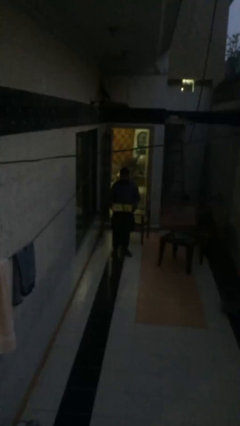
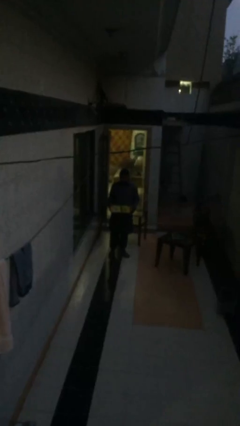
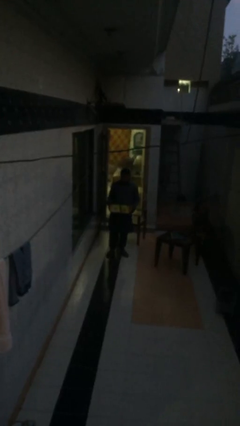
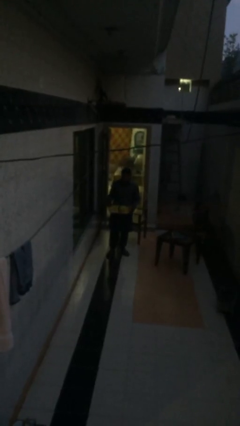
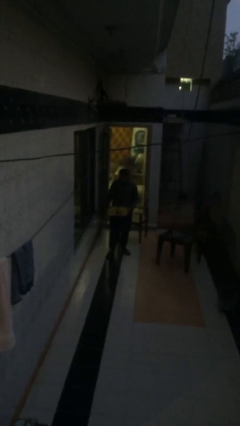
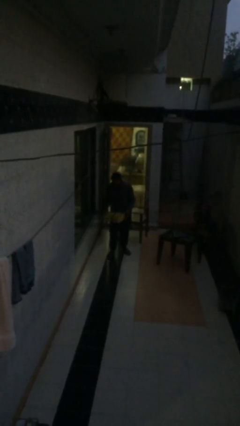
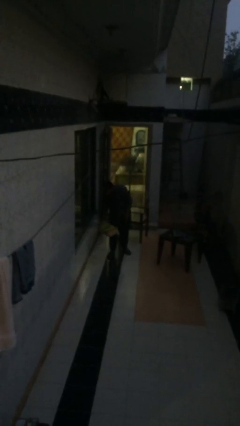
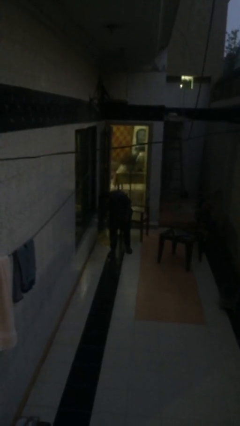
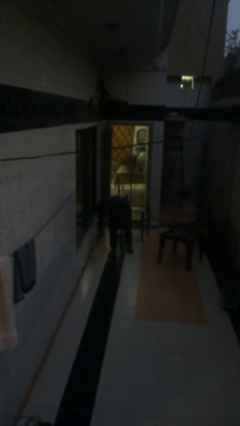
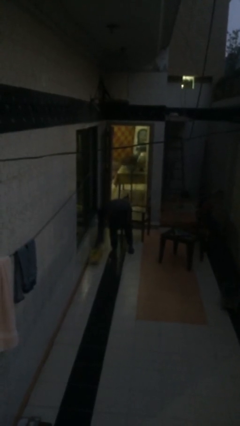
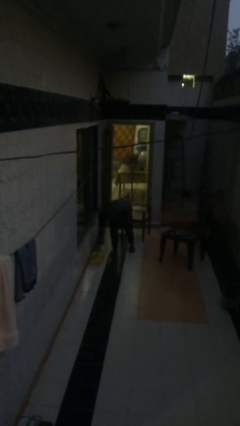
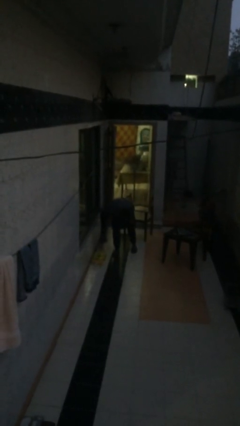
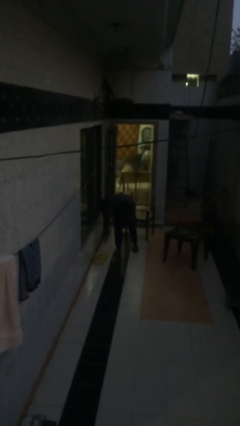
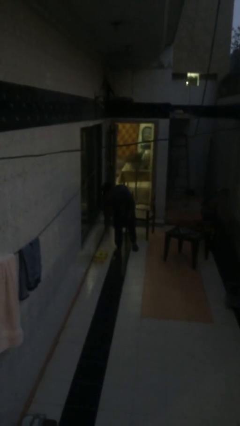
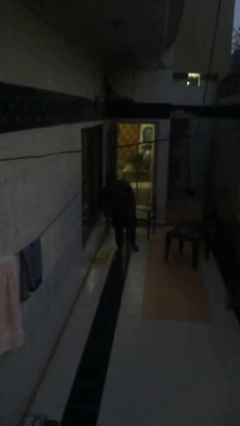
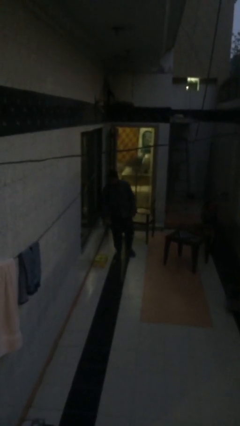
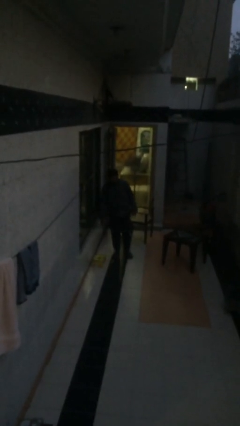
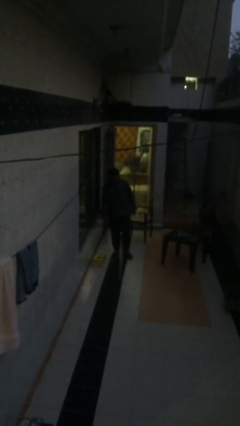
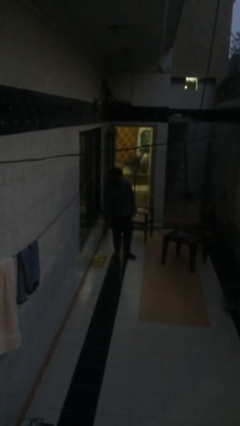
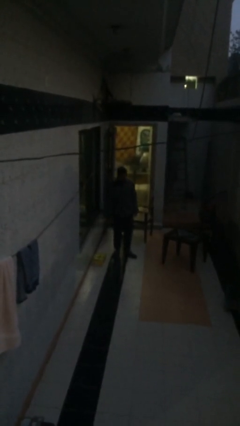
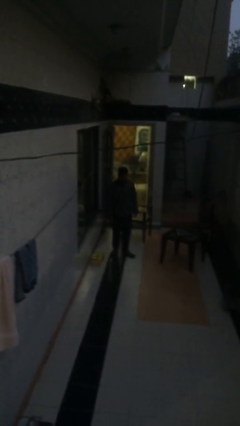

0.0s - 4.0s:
person puts down object on floor

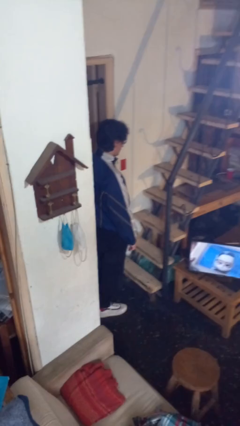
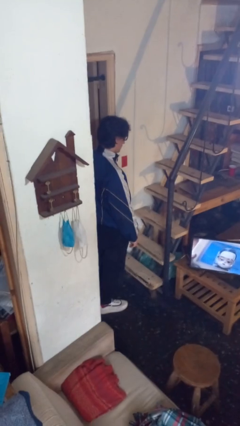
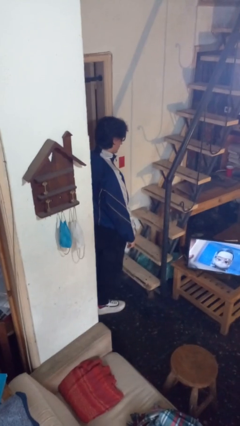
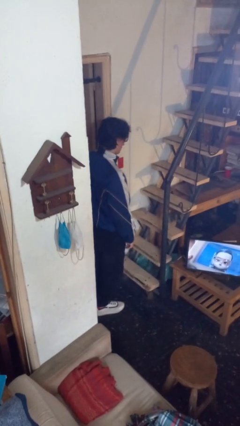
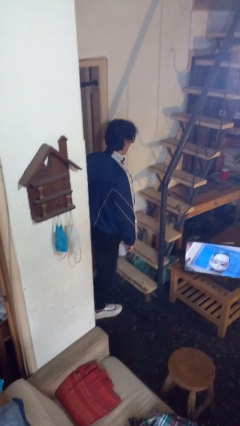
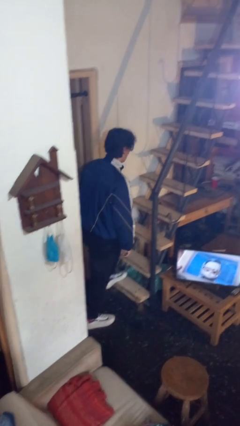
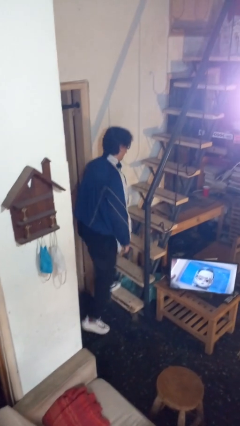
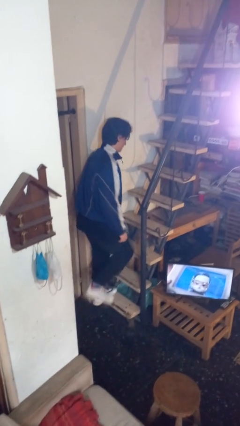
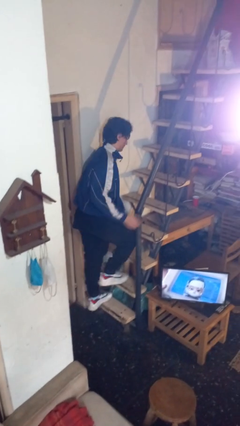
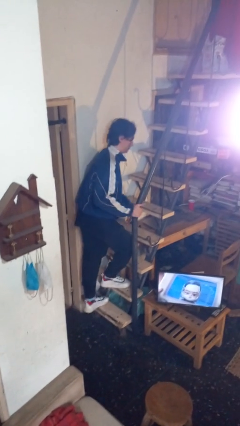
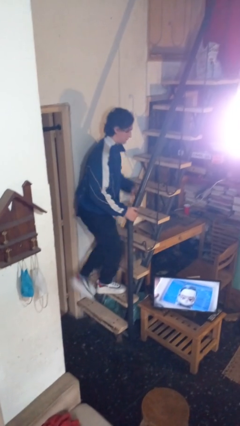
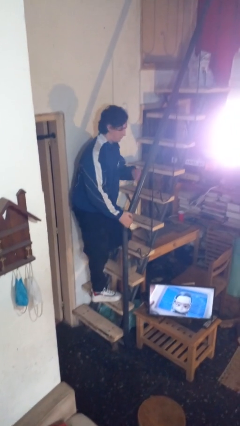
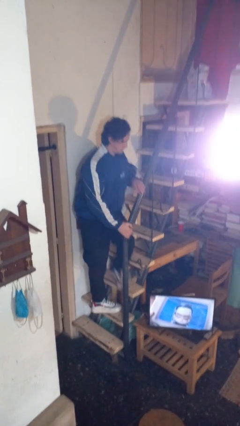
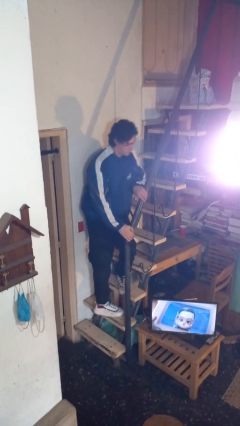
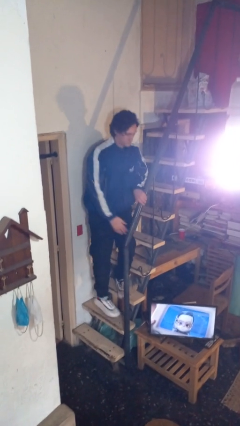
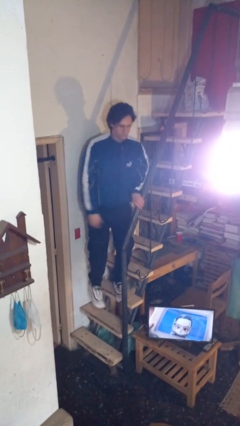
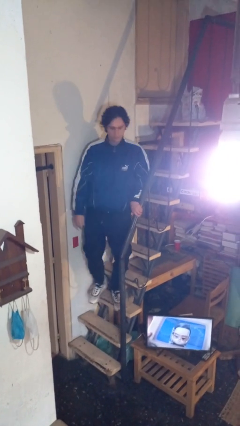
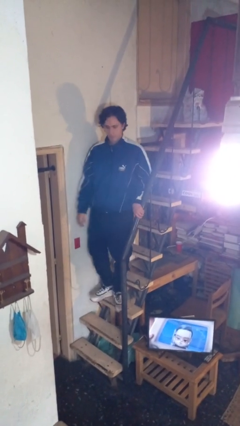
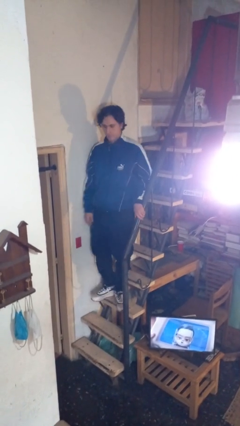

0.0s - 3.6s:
person climbs up stairs

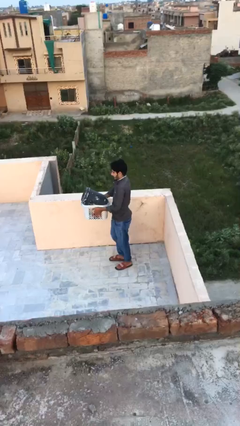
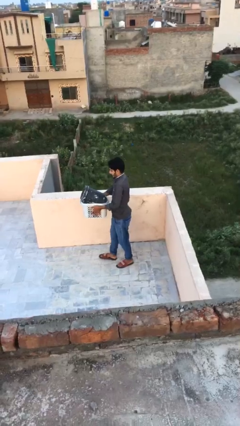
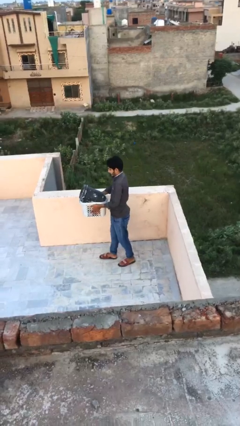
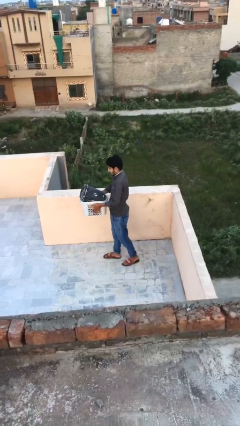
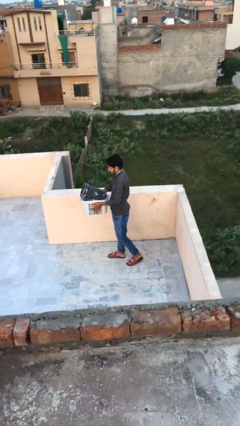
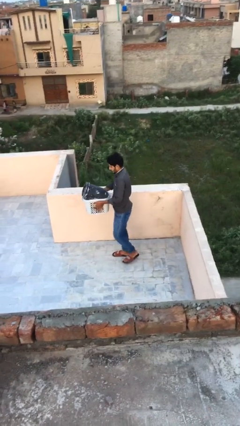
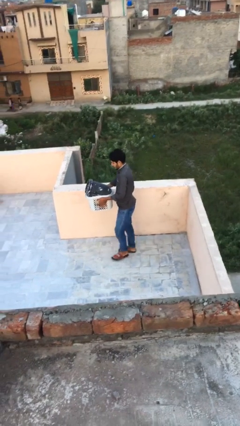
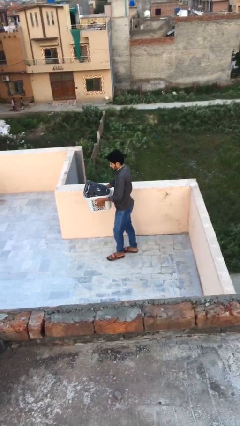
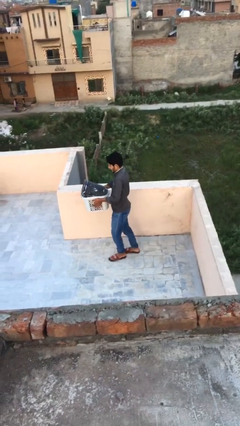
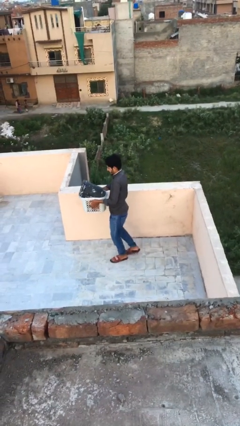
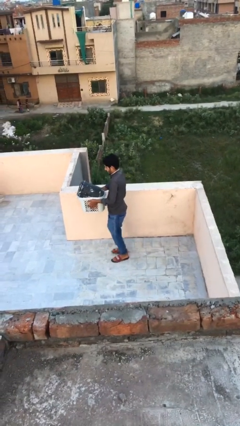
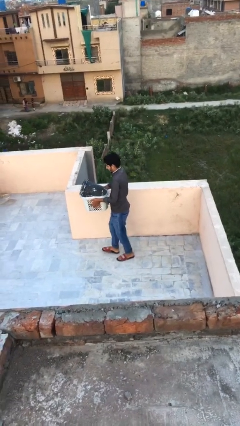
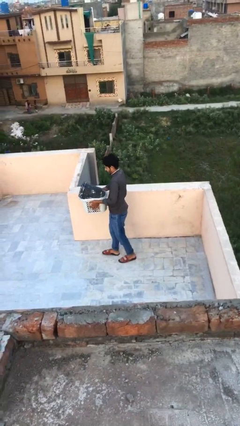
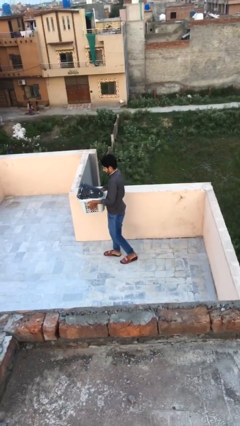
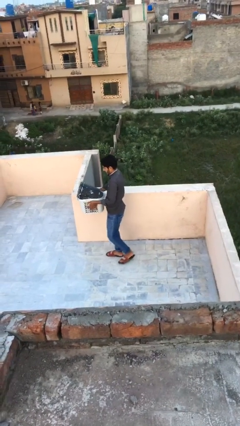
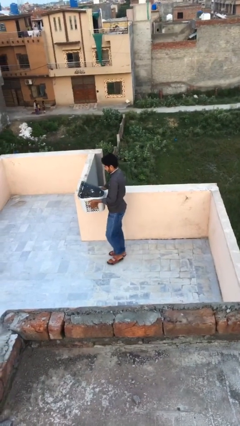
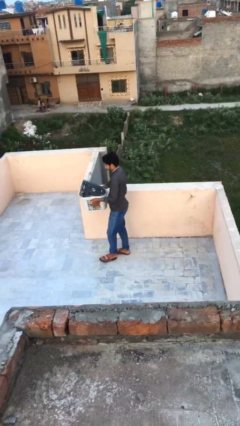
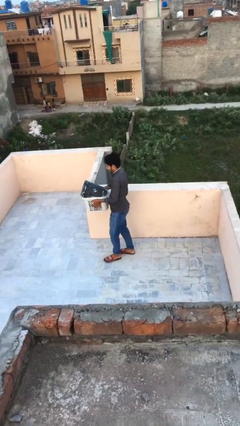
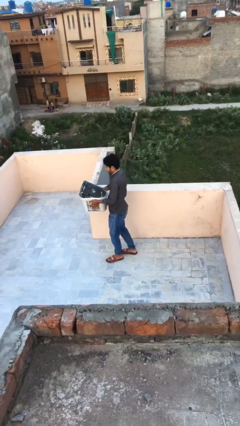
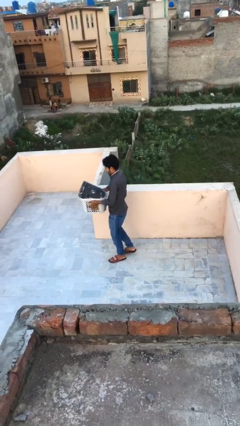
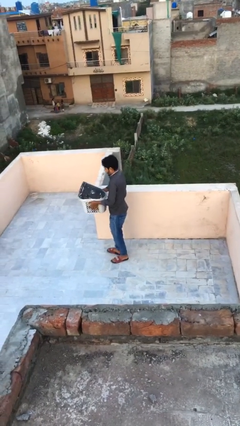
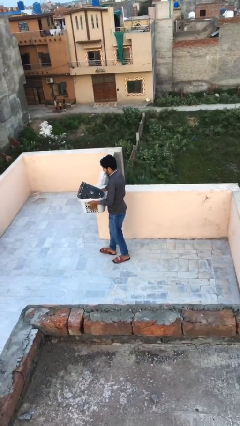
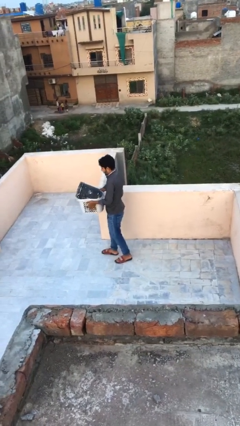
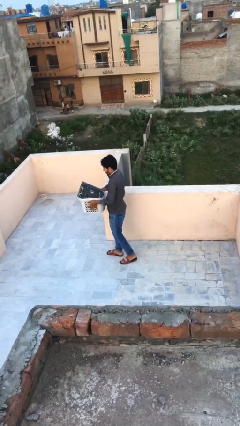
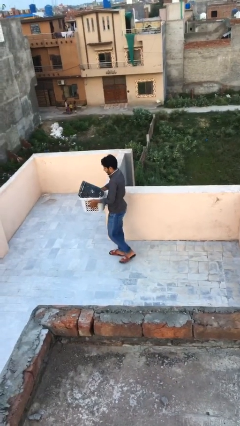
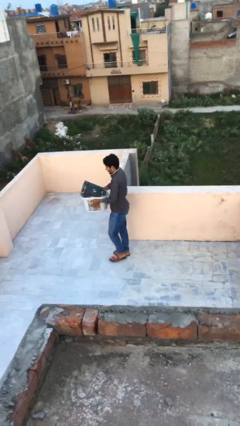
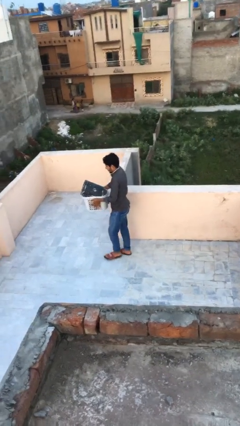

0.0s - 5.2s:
person carries heavy object

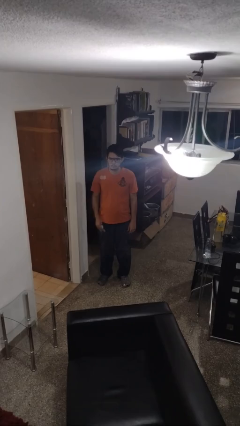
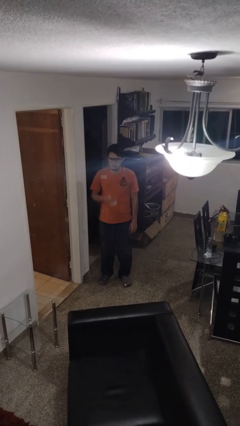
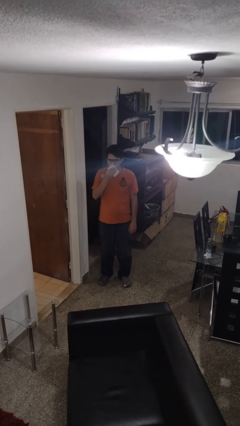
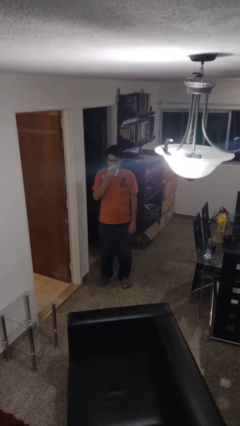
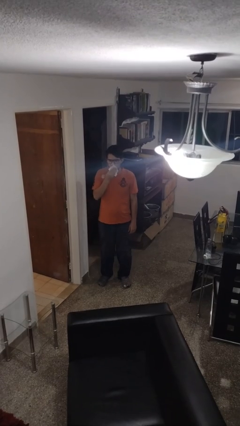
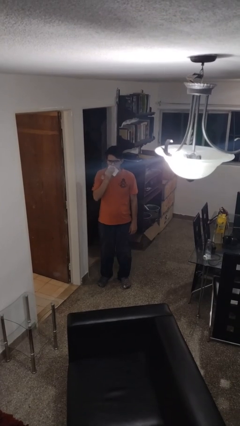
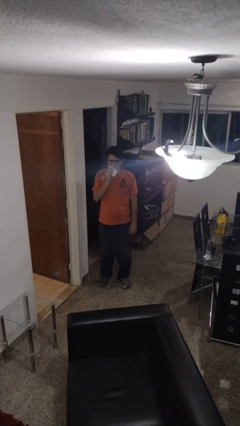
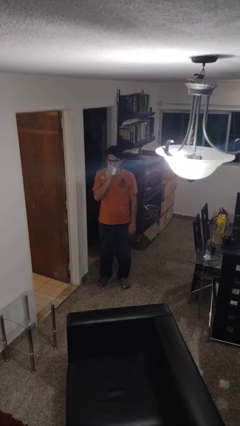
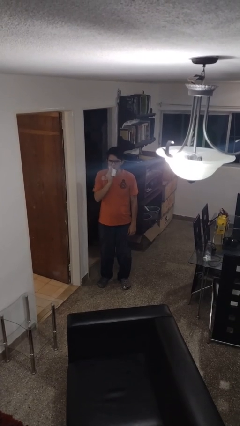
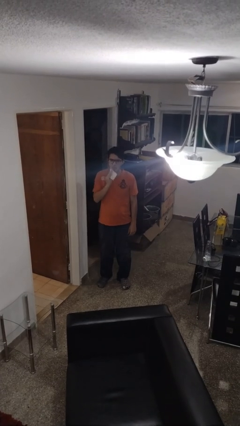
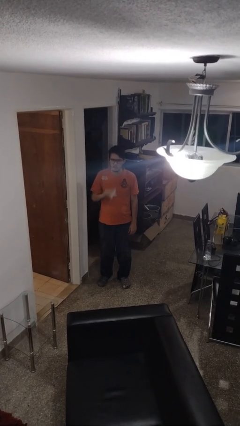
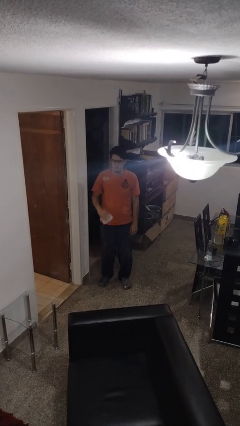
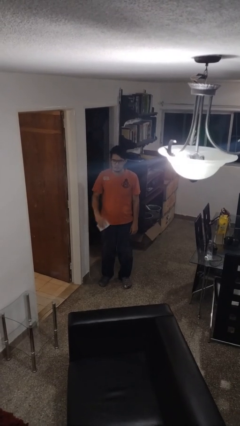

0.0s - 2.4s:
person wipes mouth with napkin

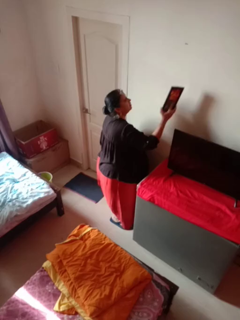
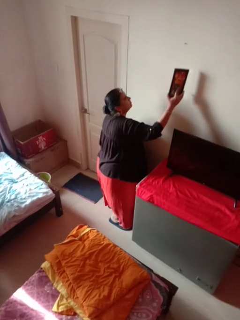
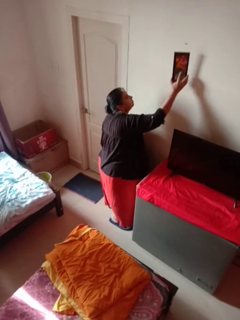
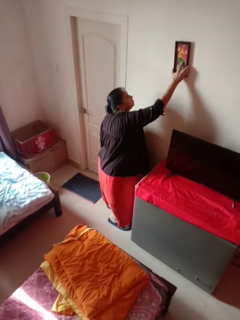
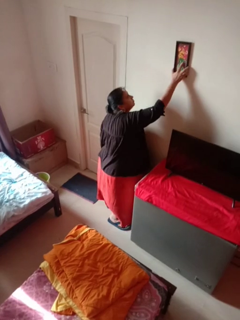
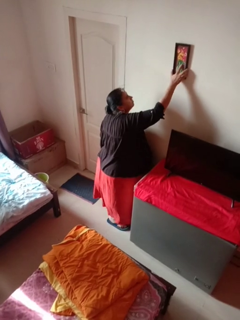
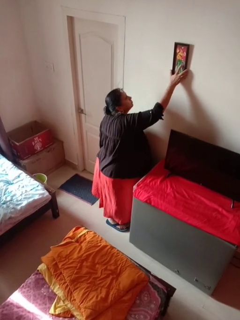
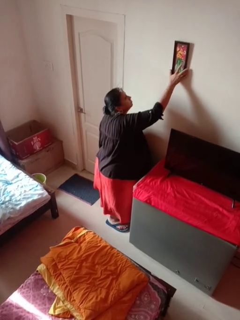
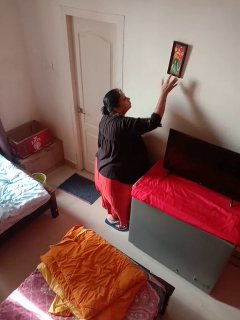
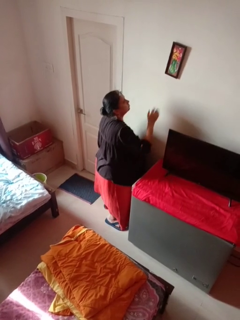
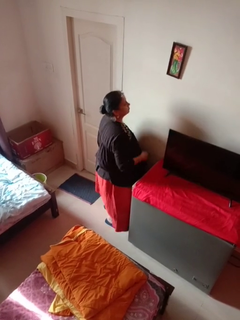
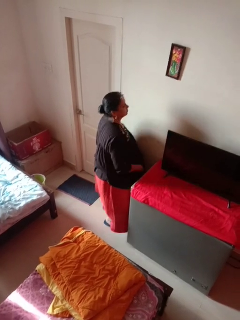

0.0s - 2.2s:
person puts up picture frame

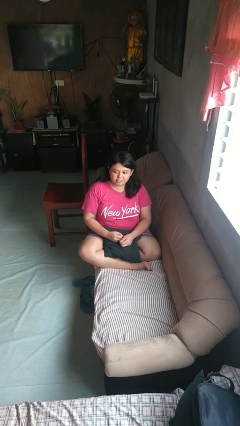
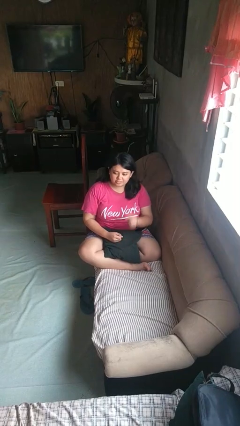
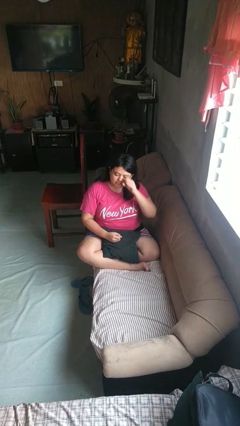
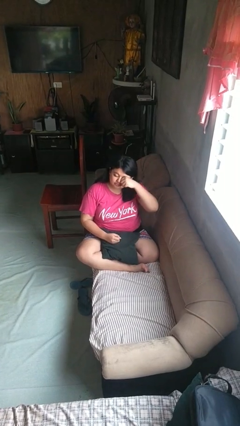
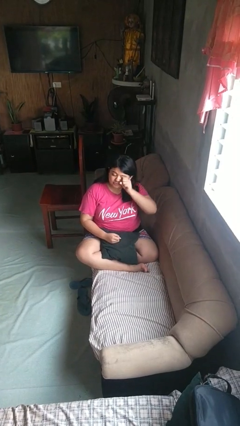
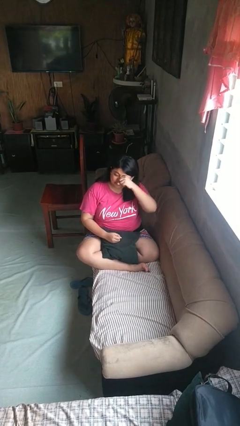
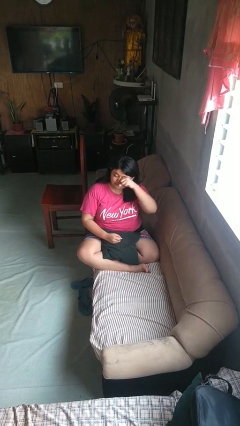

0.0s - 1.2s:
person rubs eyes
